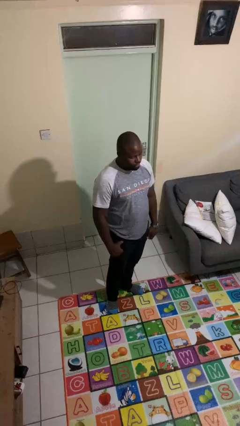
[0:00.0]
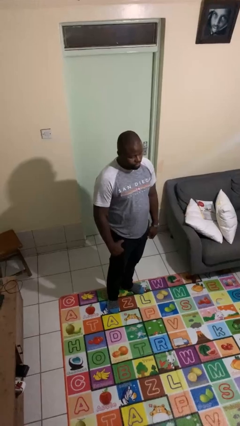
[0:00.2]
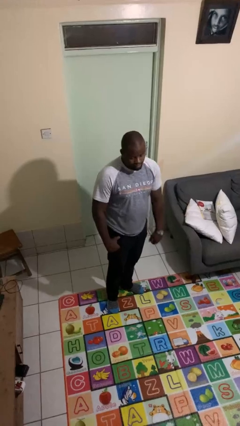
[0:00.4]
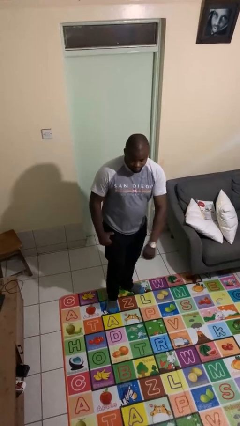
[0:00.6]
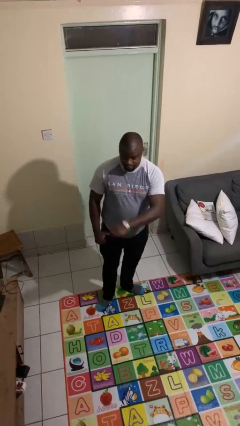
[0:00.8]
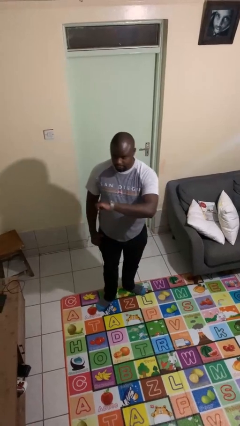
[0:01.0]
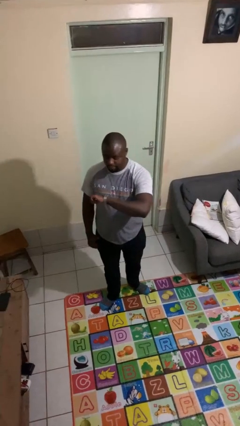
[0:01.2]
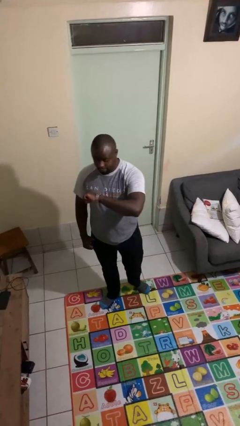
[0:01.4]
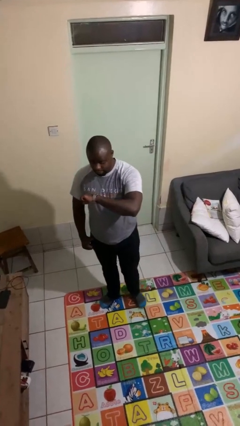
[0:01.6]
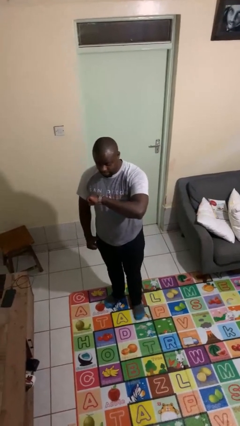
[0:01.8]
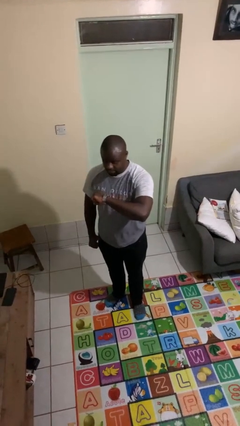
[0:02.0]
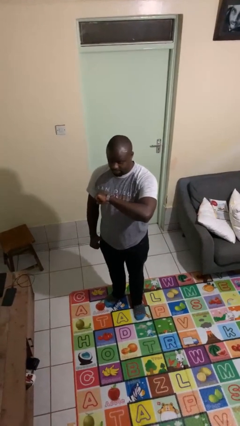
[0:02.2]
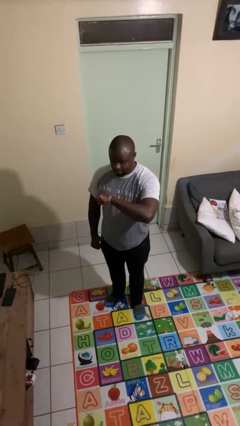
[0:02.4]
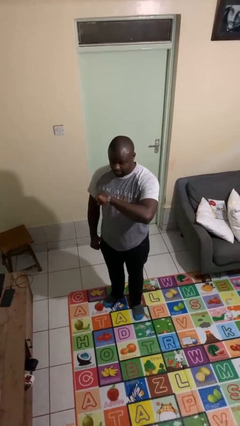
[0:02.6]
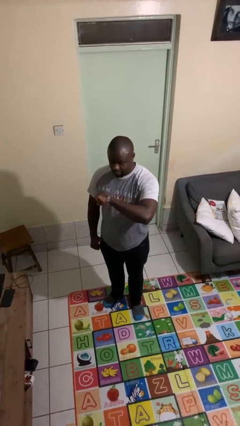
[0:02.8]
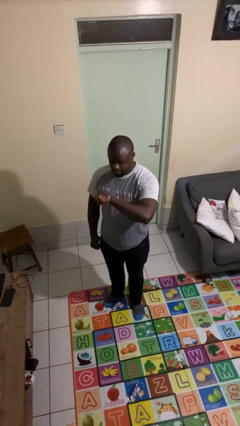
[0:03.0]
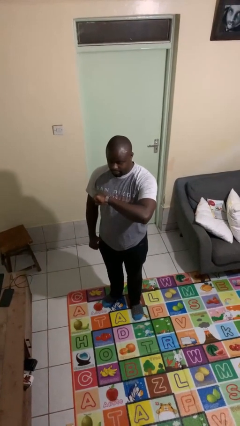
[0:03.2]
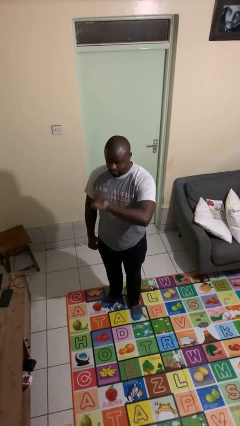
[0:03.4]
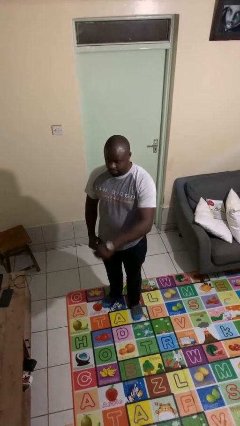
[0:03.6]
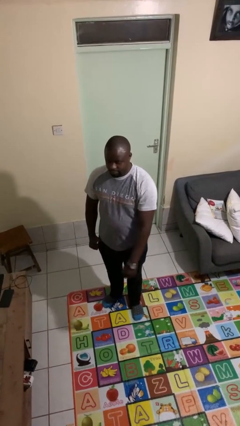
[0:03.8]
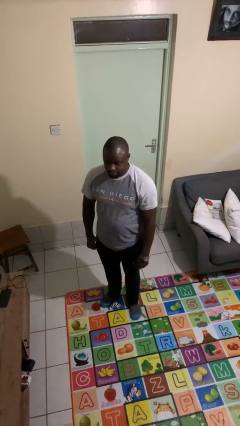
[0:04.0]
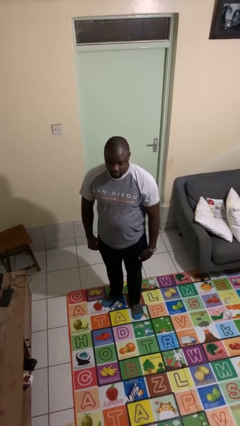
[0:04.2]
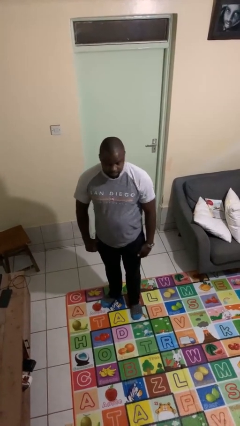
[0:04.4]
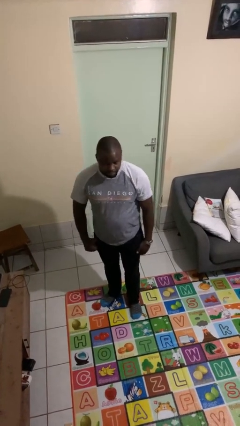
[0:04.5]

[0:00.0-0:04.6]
person looks at wristwatch

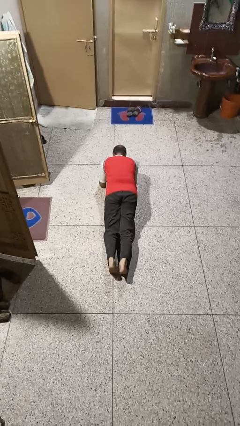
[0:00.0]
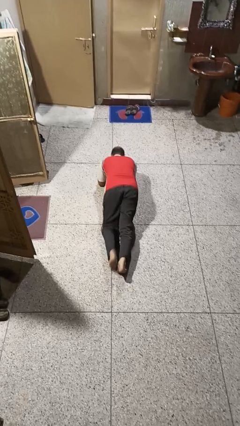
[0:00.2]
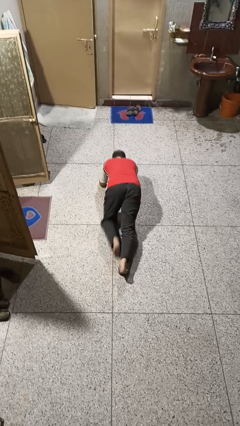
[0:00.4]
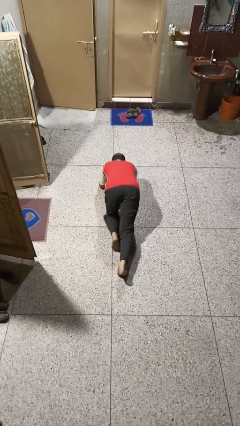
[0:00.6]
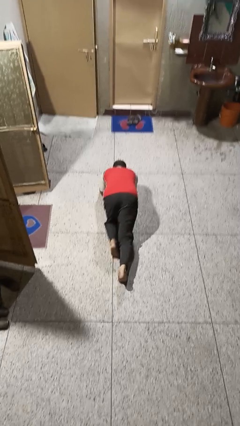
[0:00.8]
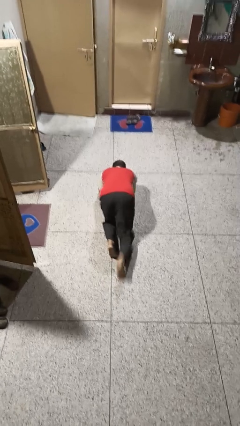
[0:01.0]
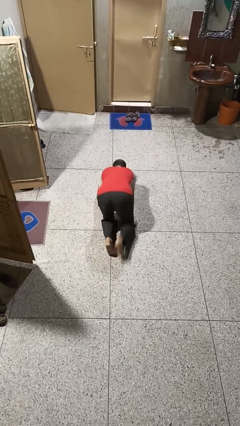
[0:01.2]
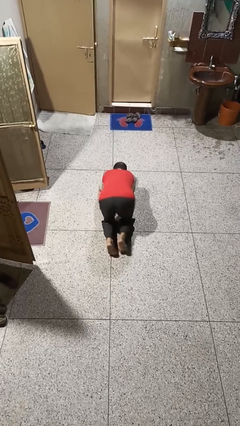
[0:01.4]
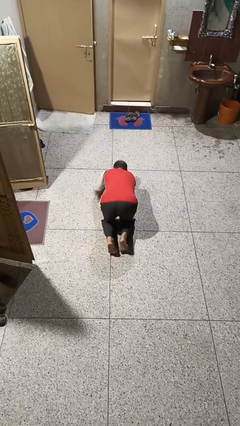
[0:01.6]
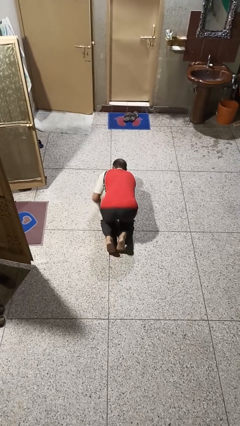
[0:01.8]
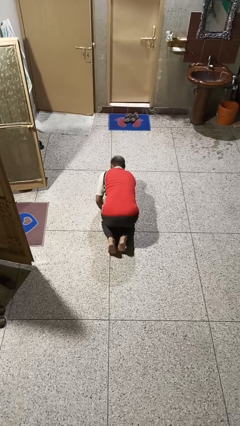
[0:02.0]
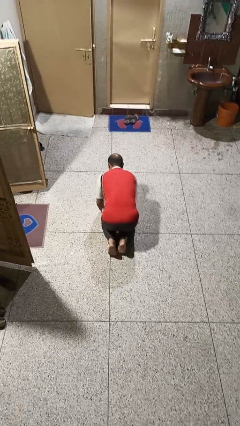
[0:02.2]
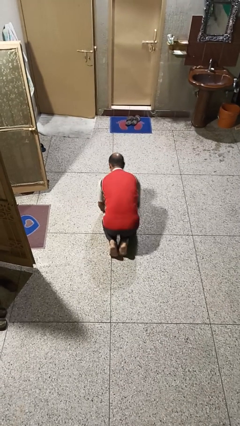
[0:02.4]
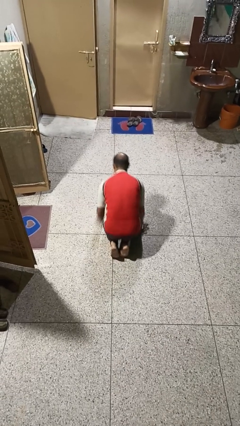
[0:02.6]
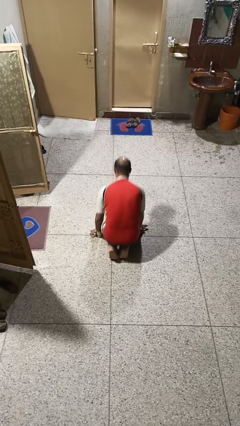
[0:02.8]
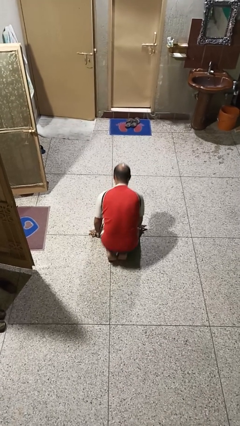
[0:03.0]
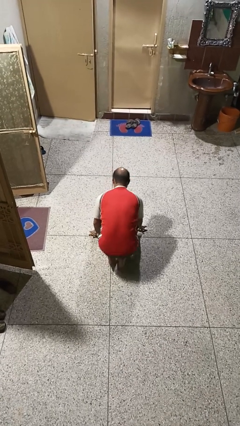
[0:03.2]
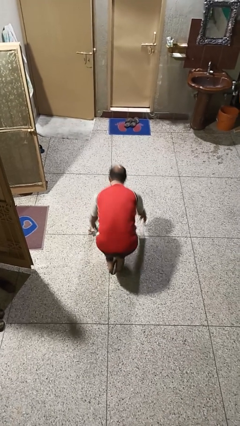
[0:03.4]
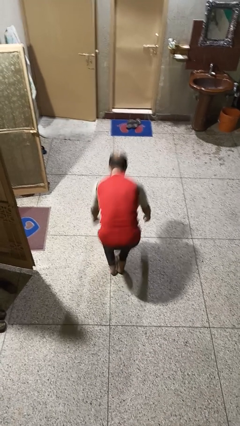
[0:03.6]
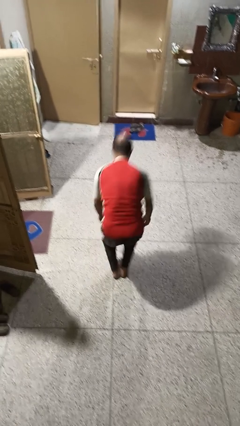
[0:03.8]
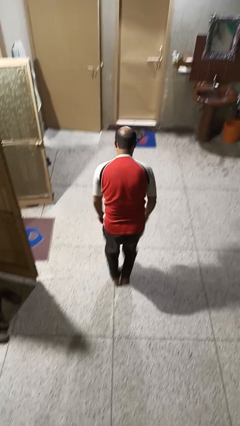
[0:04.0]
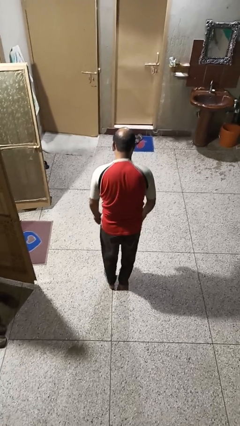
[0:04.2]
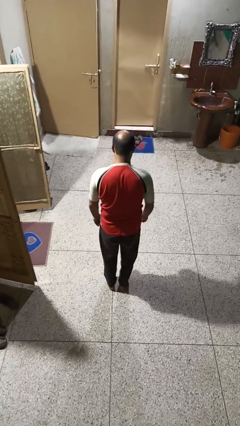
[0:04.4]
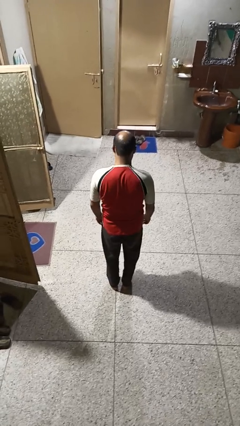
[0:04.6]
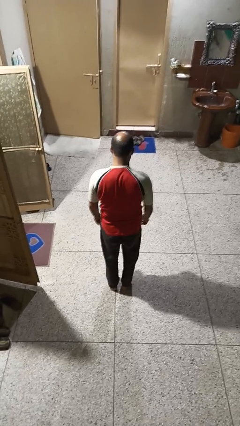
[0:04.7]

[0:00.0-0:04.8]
person stands up from floor

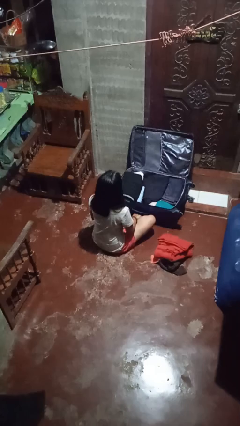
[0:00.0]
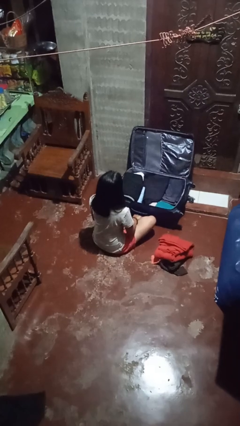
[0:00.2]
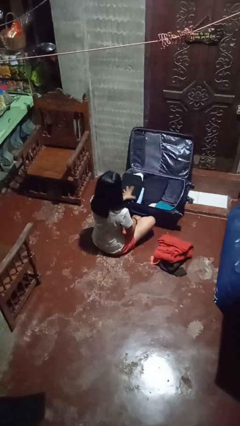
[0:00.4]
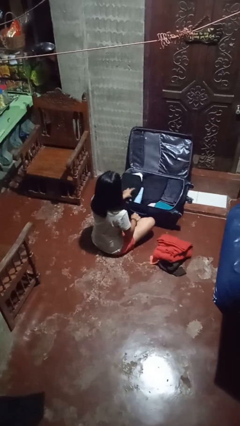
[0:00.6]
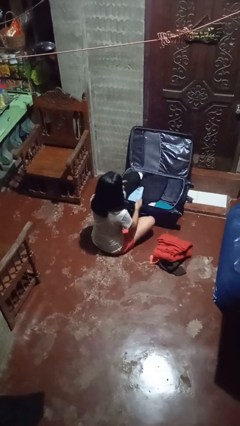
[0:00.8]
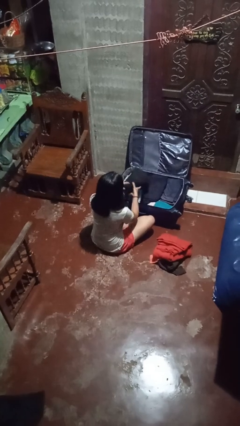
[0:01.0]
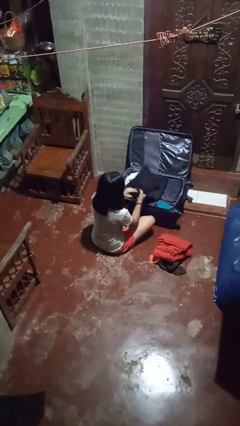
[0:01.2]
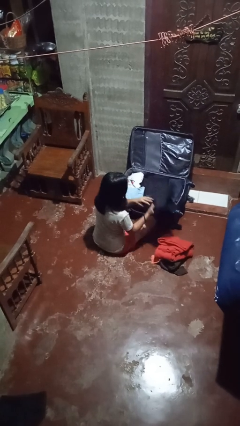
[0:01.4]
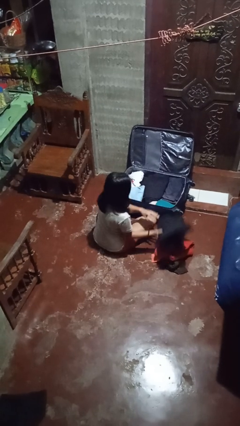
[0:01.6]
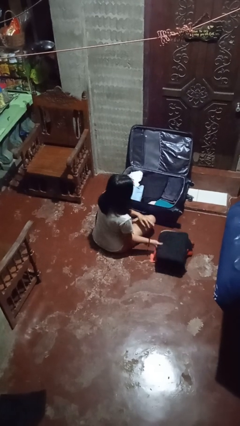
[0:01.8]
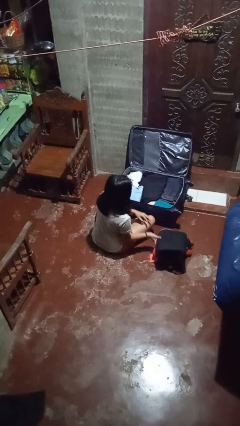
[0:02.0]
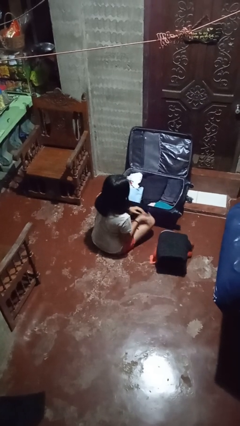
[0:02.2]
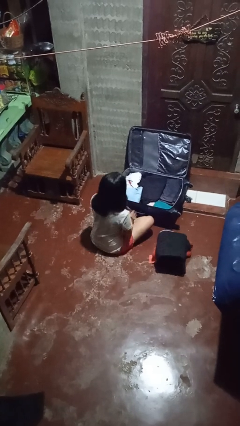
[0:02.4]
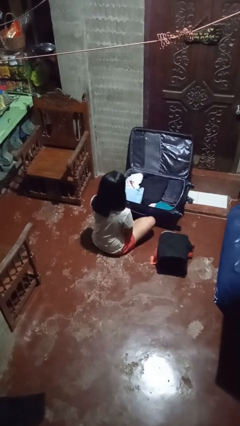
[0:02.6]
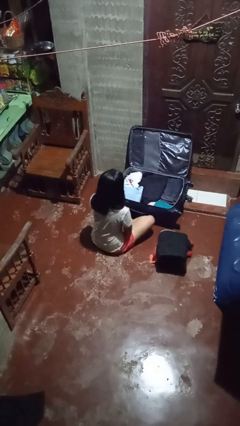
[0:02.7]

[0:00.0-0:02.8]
person unloads clothes from suitcase

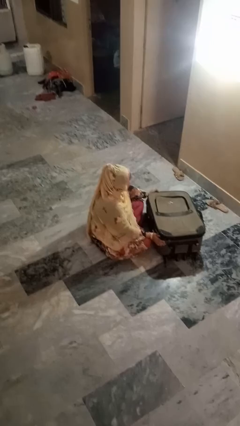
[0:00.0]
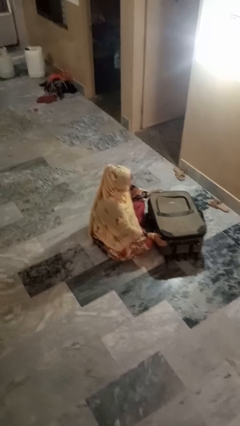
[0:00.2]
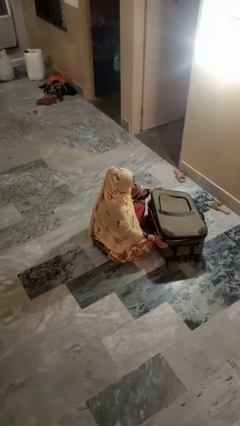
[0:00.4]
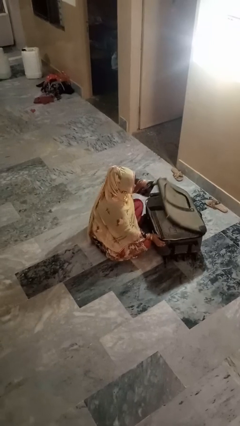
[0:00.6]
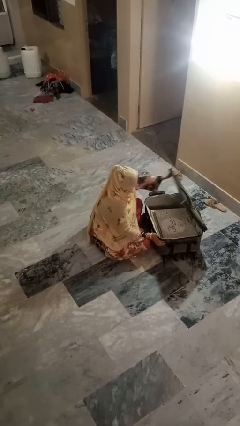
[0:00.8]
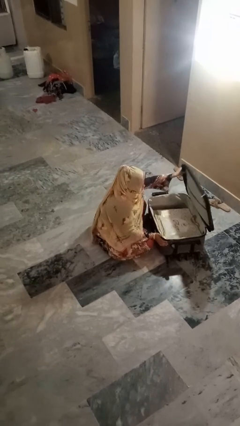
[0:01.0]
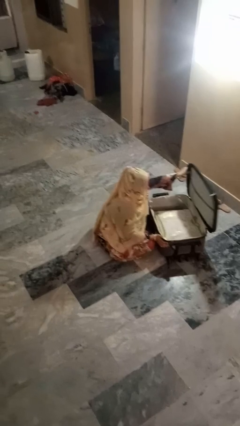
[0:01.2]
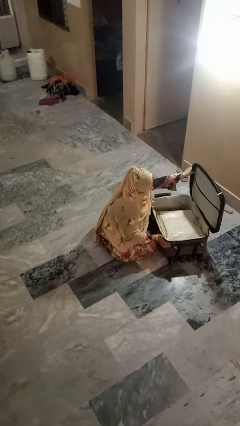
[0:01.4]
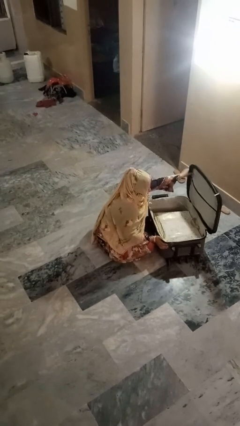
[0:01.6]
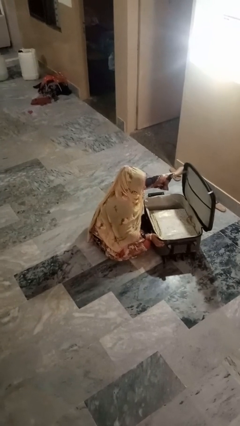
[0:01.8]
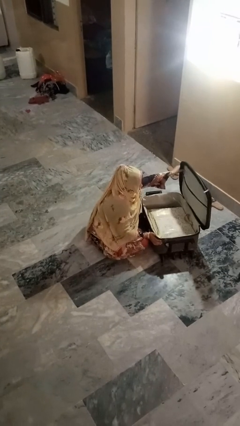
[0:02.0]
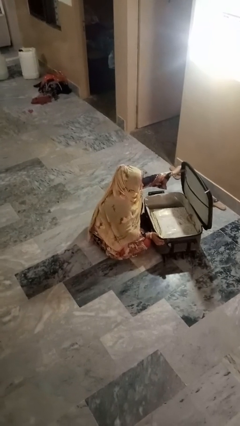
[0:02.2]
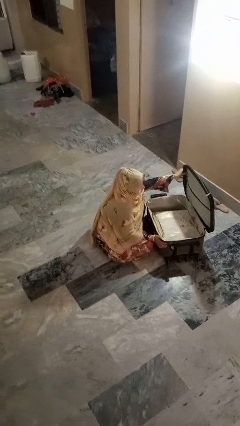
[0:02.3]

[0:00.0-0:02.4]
person opens suitcase

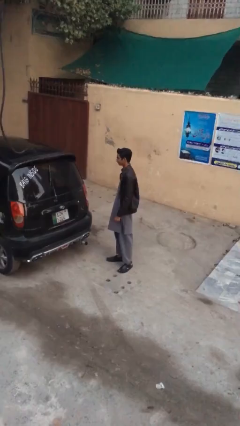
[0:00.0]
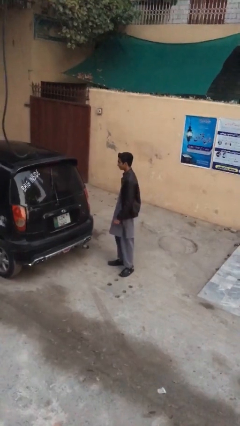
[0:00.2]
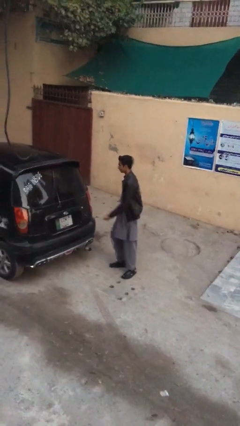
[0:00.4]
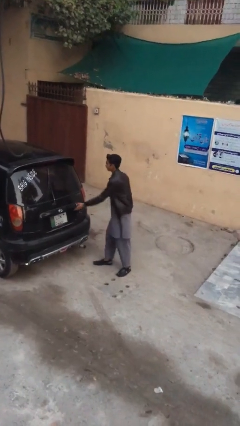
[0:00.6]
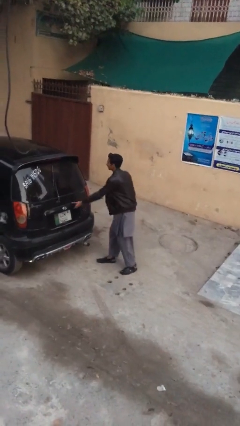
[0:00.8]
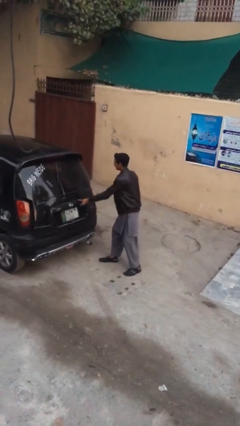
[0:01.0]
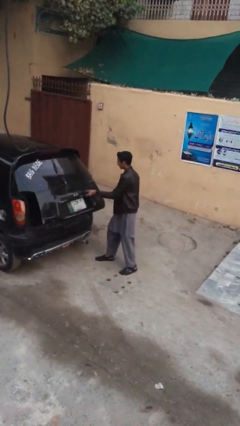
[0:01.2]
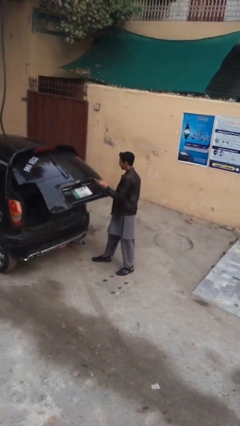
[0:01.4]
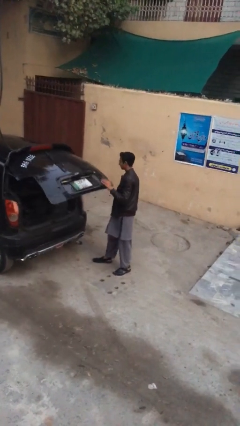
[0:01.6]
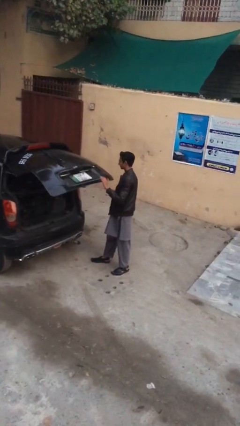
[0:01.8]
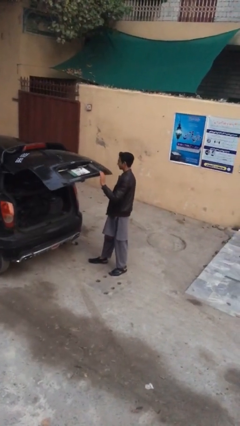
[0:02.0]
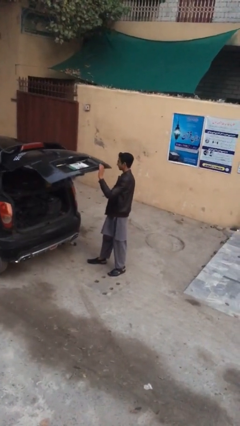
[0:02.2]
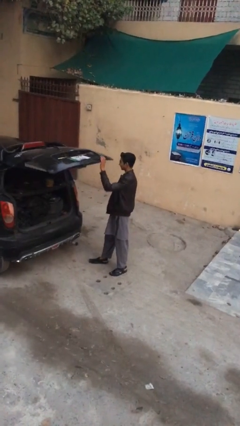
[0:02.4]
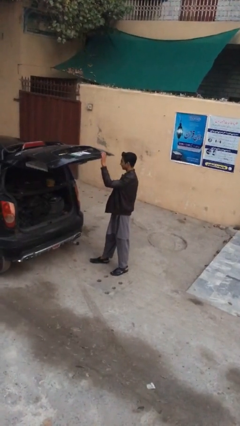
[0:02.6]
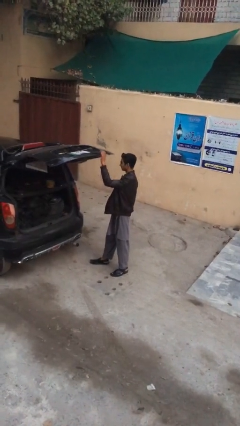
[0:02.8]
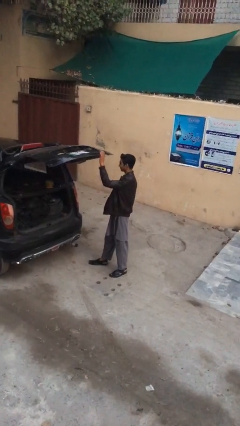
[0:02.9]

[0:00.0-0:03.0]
person opens car trunk
